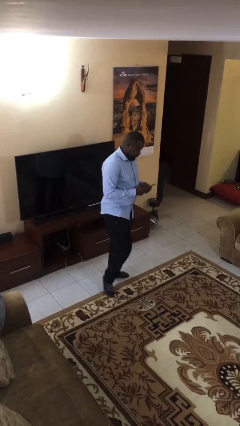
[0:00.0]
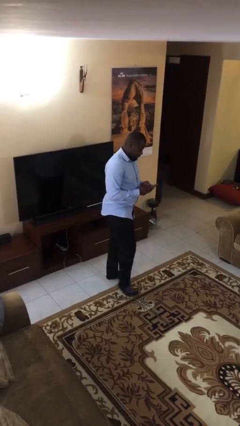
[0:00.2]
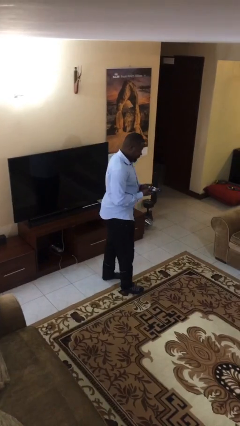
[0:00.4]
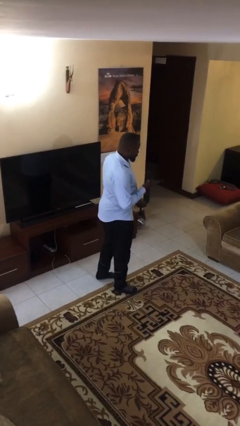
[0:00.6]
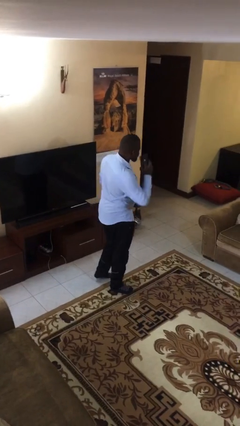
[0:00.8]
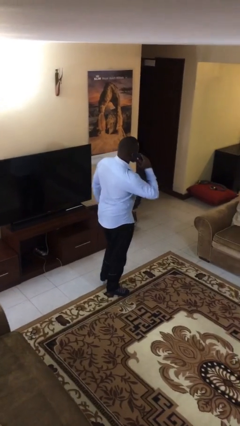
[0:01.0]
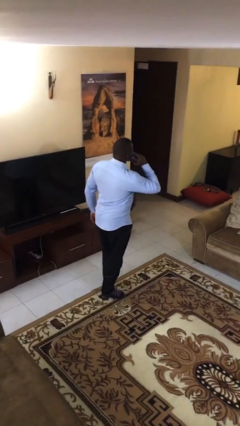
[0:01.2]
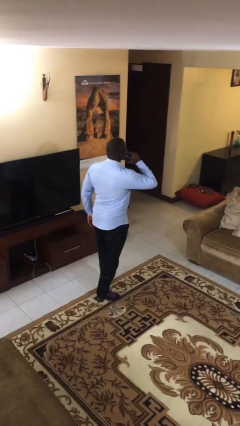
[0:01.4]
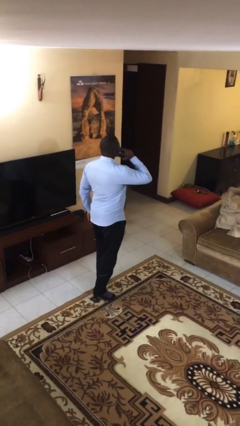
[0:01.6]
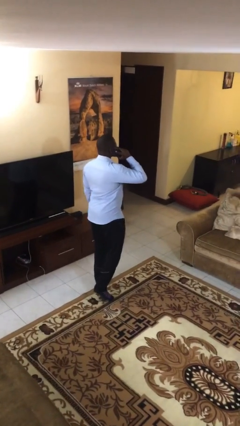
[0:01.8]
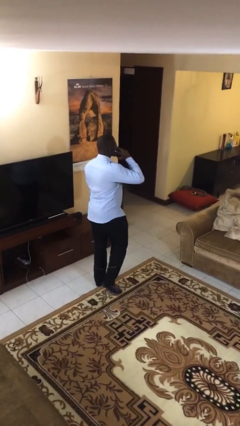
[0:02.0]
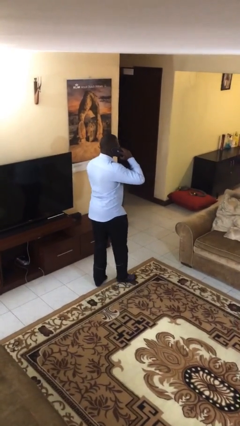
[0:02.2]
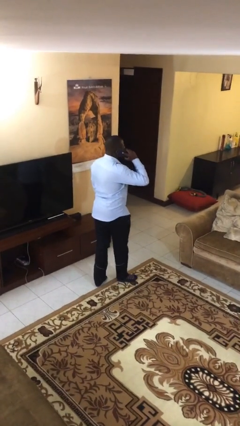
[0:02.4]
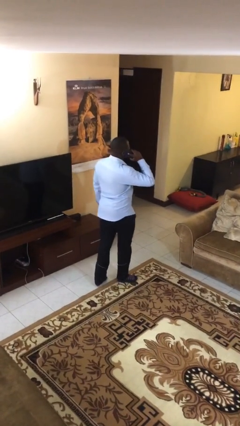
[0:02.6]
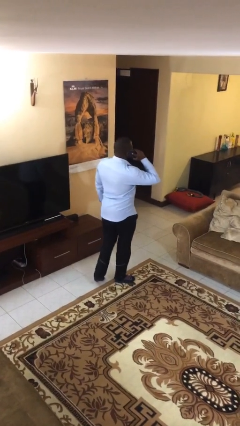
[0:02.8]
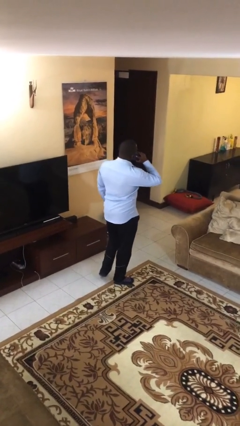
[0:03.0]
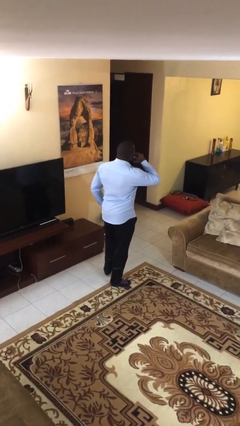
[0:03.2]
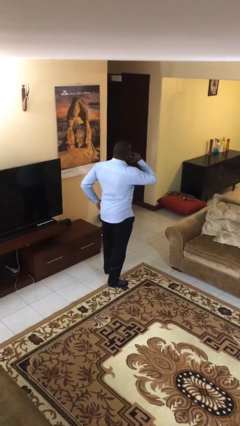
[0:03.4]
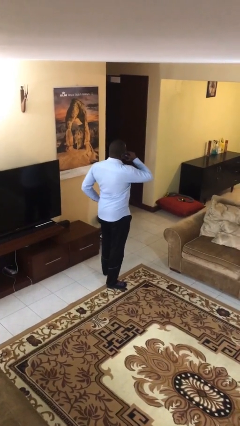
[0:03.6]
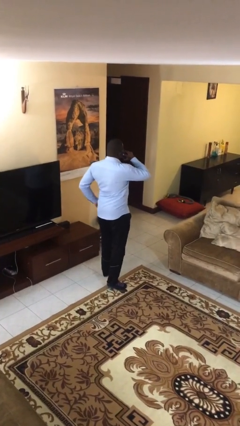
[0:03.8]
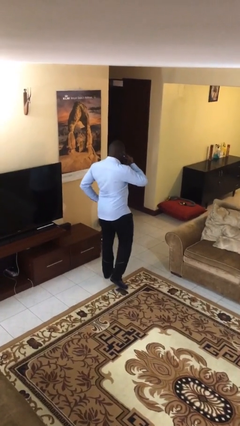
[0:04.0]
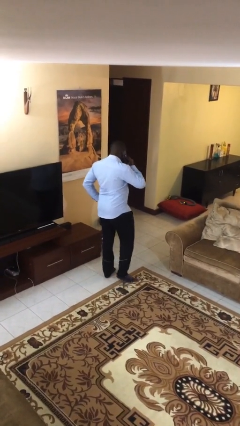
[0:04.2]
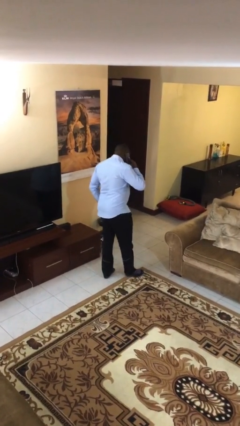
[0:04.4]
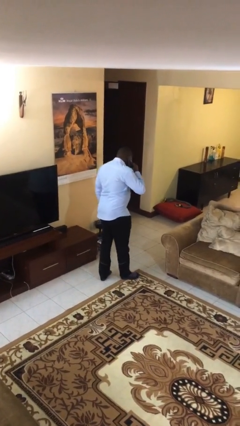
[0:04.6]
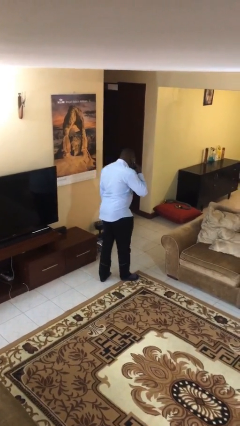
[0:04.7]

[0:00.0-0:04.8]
person talks on phone

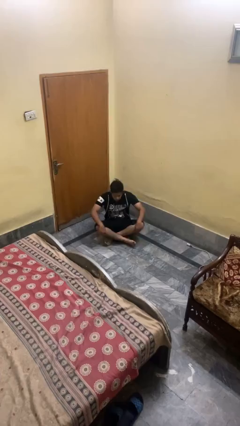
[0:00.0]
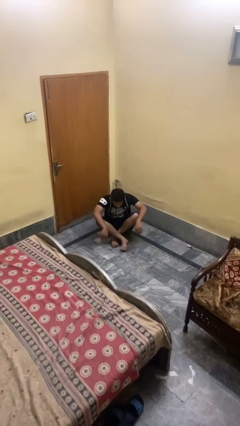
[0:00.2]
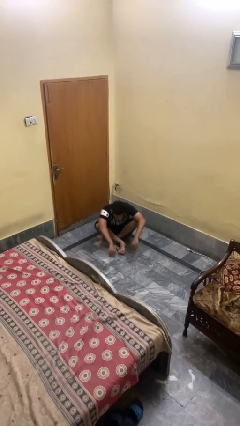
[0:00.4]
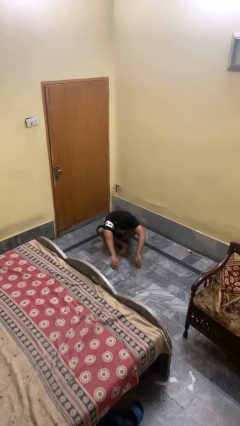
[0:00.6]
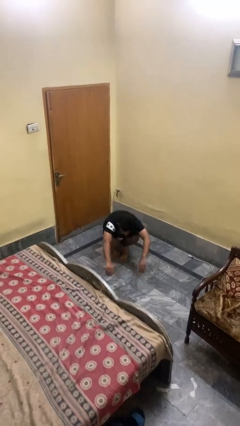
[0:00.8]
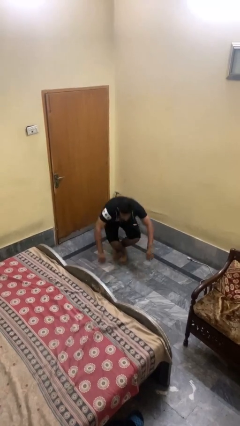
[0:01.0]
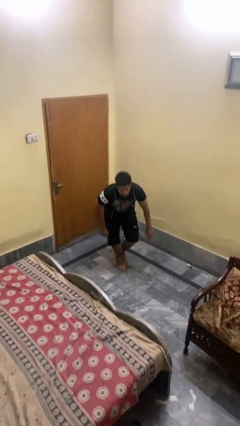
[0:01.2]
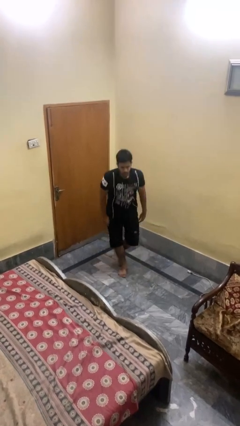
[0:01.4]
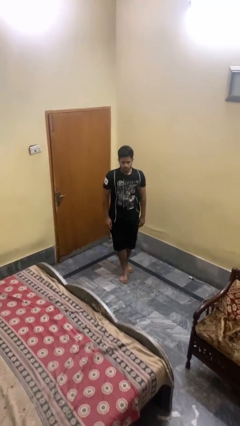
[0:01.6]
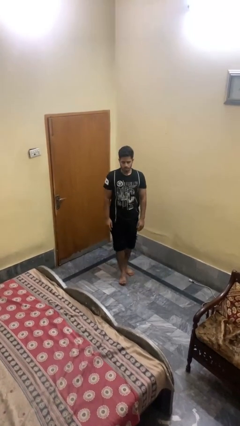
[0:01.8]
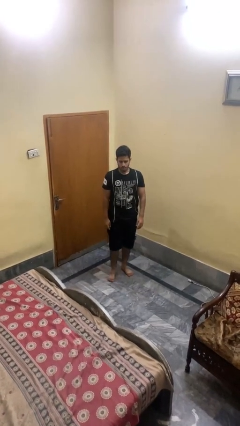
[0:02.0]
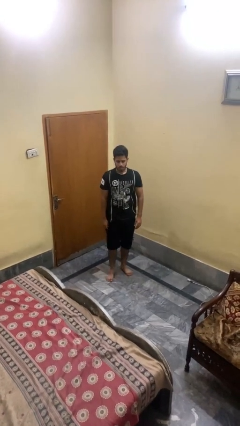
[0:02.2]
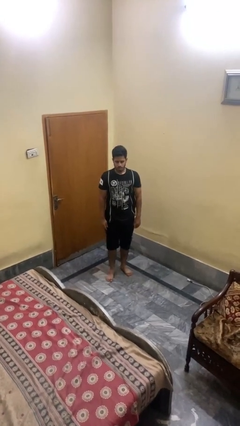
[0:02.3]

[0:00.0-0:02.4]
person stands up from floor

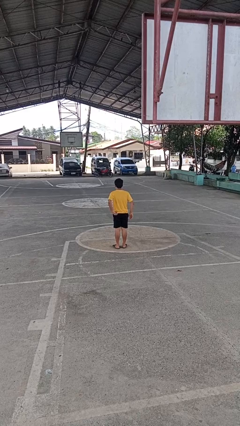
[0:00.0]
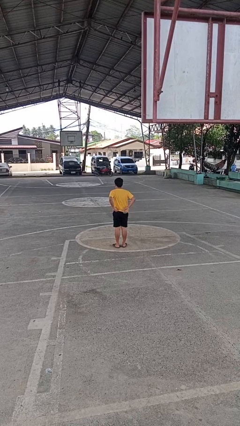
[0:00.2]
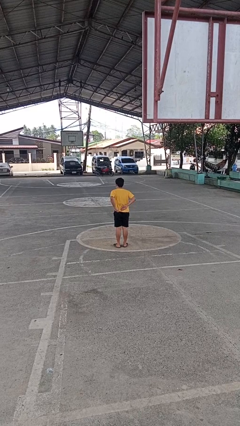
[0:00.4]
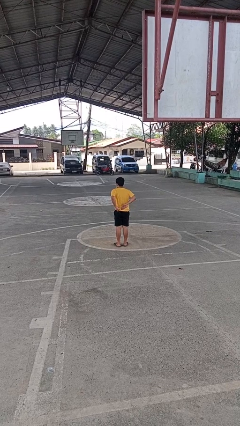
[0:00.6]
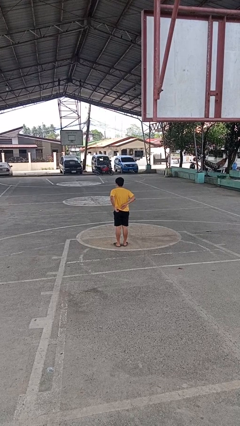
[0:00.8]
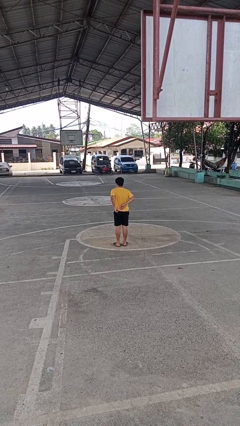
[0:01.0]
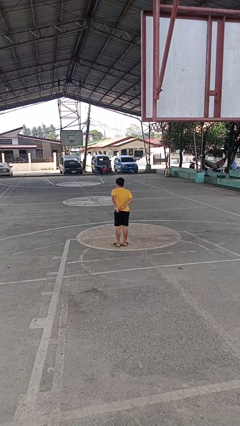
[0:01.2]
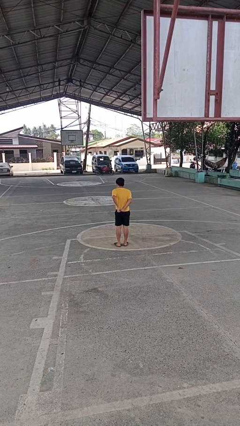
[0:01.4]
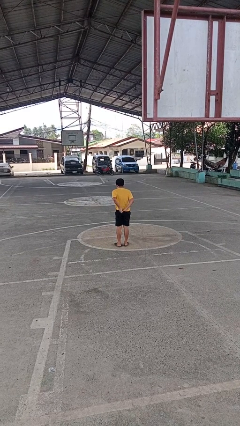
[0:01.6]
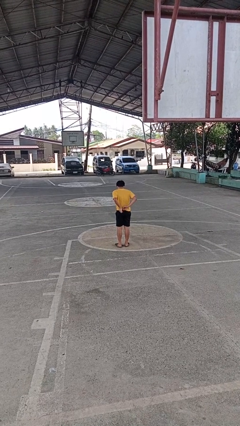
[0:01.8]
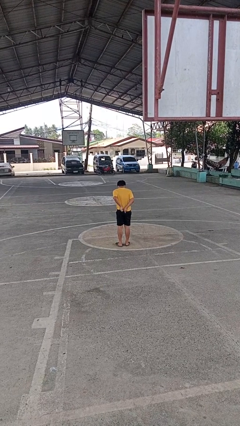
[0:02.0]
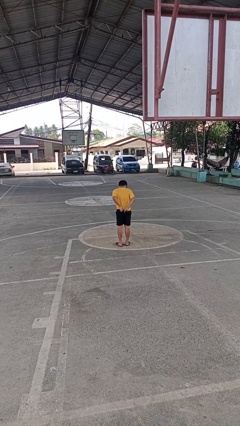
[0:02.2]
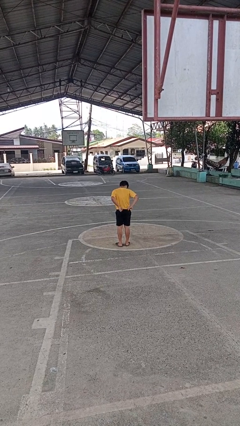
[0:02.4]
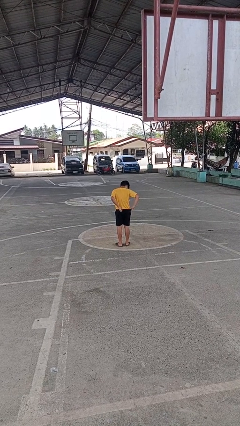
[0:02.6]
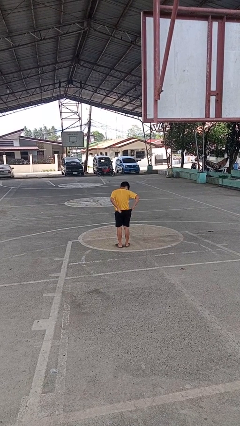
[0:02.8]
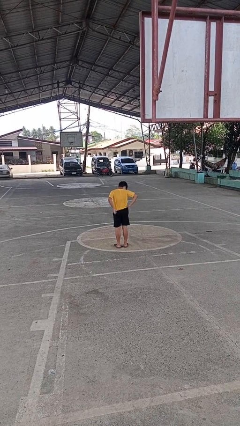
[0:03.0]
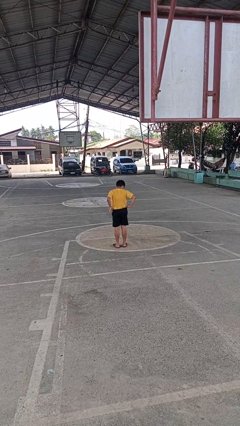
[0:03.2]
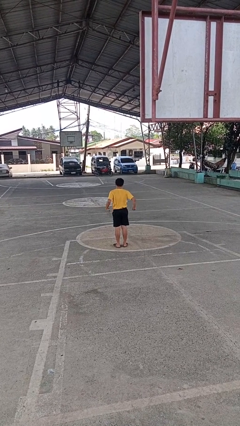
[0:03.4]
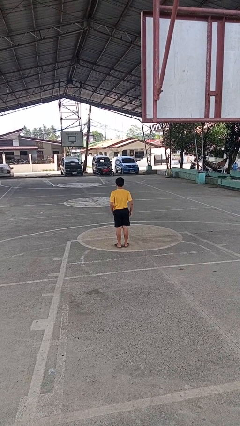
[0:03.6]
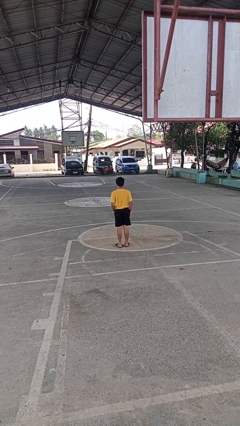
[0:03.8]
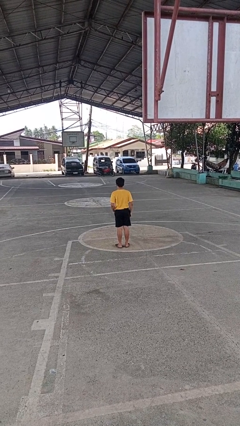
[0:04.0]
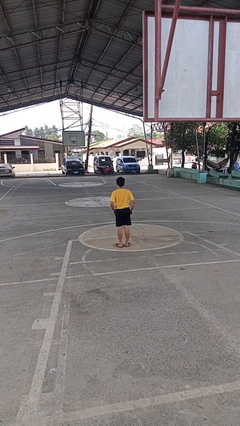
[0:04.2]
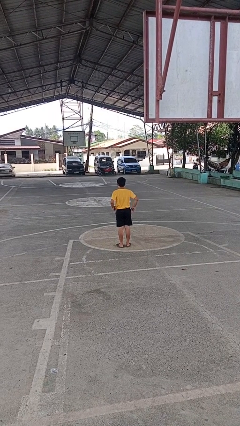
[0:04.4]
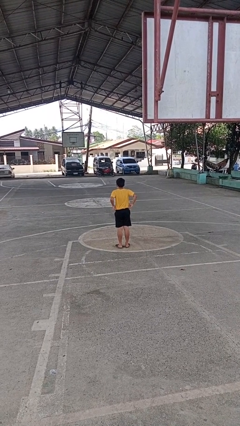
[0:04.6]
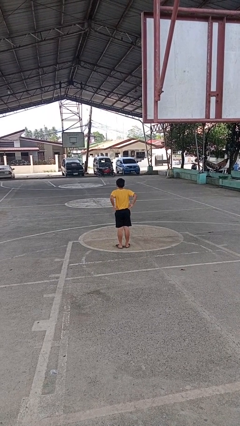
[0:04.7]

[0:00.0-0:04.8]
person tucks in shirt

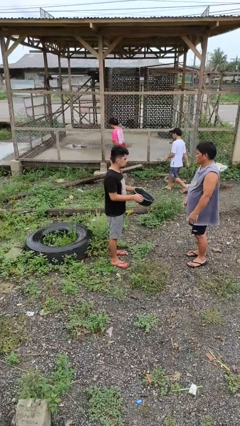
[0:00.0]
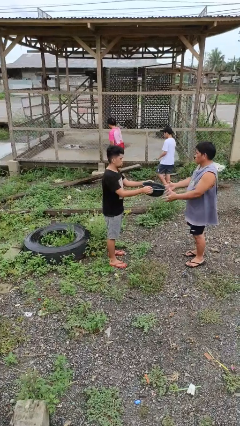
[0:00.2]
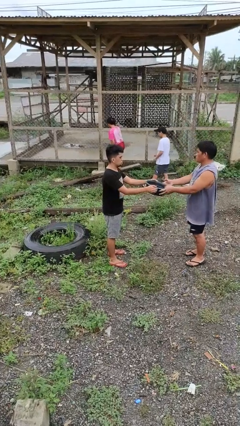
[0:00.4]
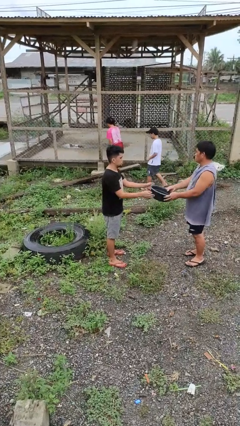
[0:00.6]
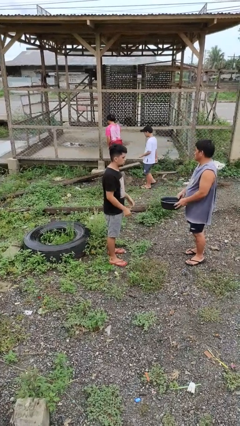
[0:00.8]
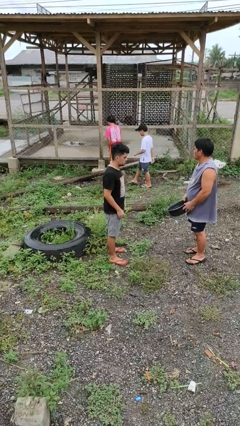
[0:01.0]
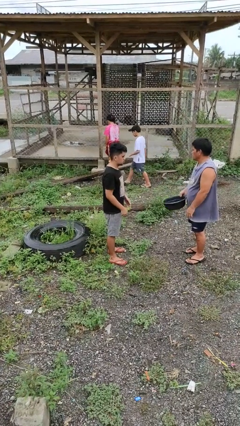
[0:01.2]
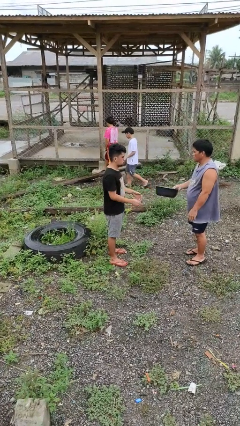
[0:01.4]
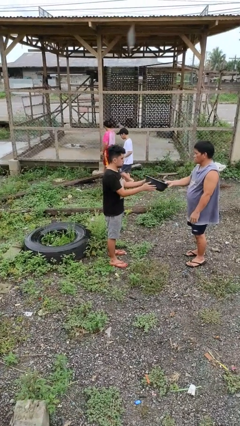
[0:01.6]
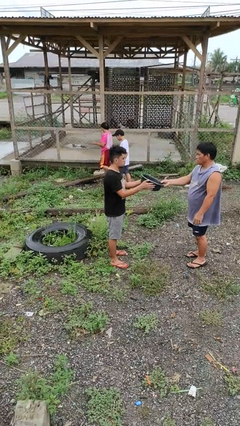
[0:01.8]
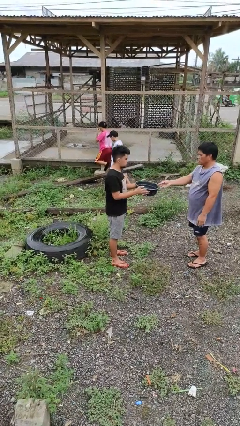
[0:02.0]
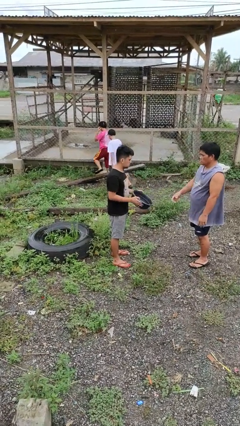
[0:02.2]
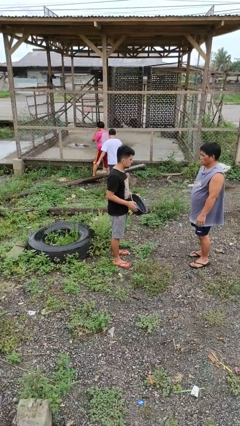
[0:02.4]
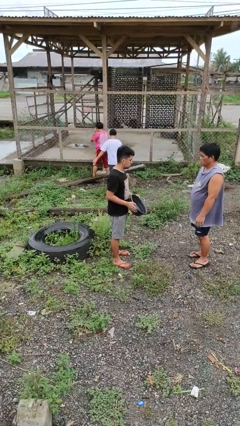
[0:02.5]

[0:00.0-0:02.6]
person transfers object to person

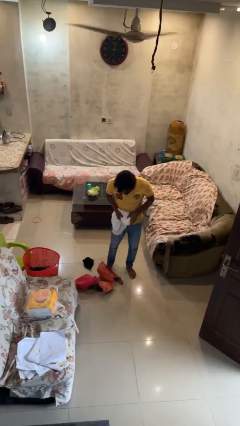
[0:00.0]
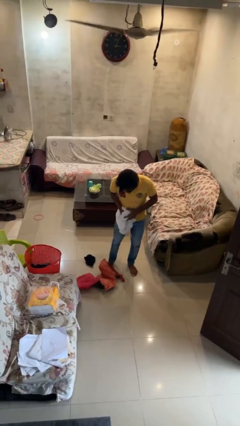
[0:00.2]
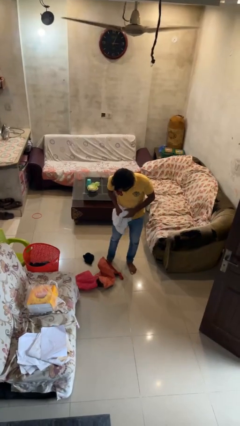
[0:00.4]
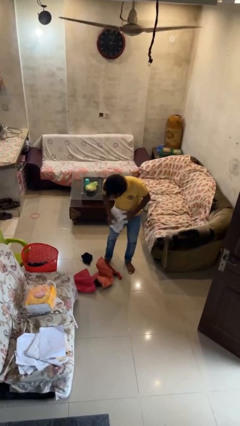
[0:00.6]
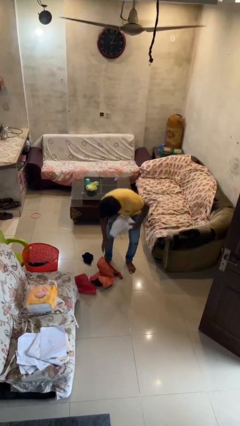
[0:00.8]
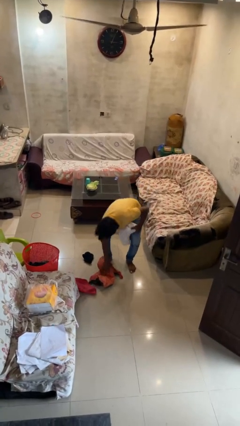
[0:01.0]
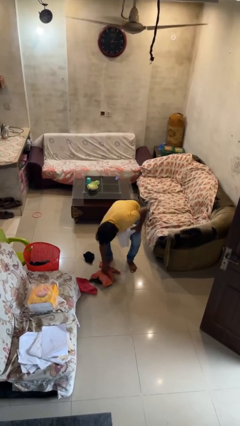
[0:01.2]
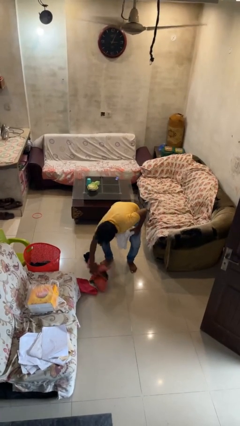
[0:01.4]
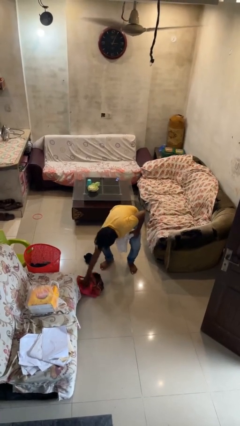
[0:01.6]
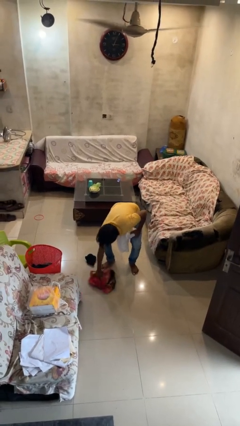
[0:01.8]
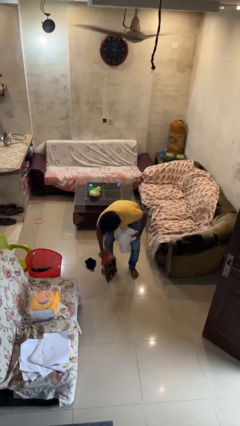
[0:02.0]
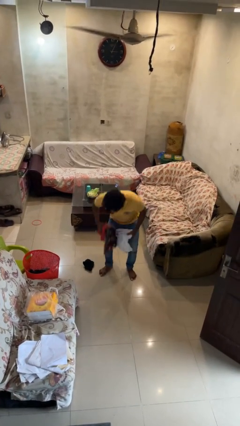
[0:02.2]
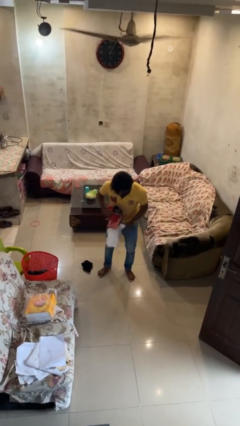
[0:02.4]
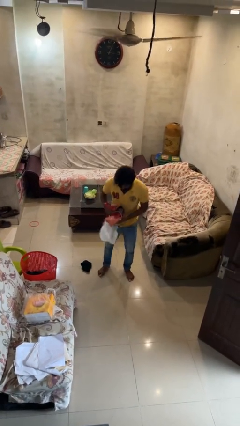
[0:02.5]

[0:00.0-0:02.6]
person picks up object from floor
